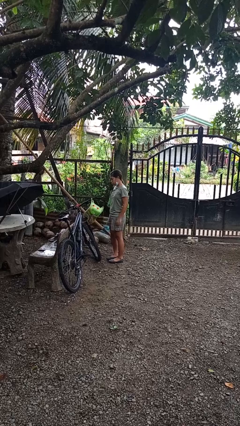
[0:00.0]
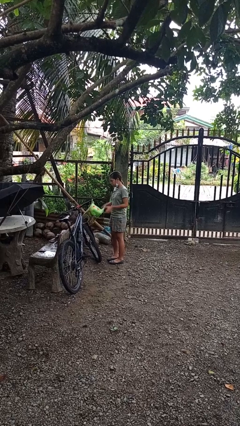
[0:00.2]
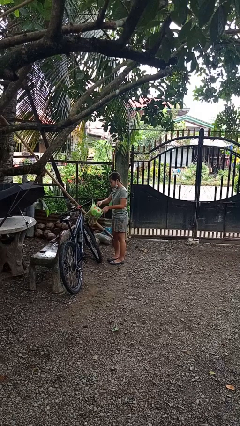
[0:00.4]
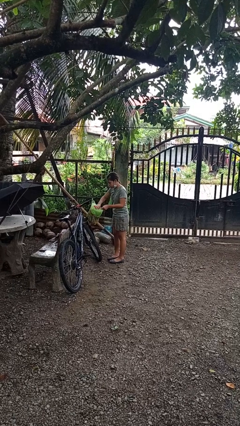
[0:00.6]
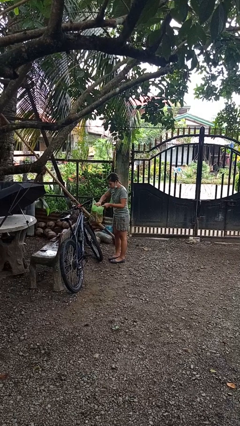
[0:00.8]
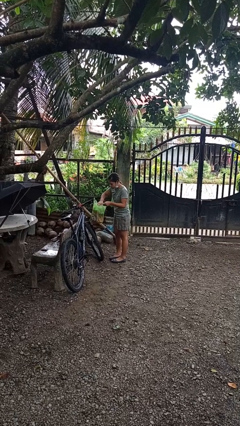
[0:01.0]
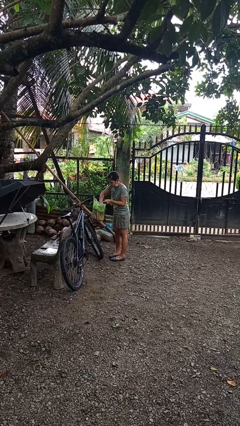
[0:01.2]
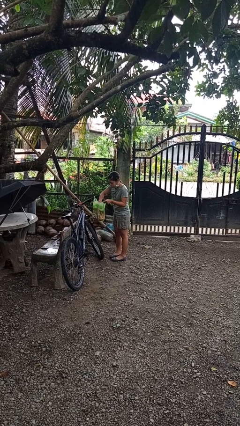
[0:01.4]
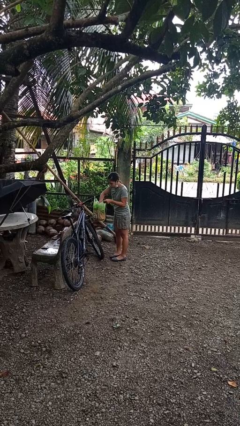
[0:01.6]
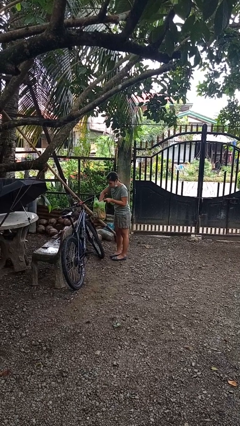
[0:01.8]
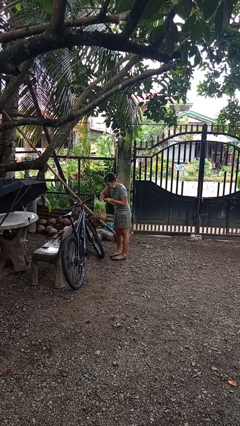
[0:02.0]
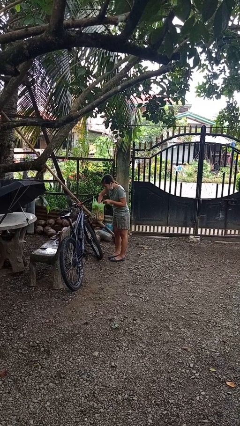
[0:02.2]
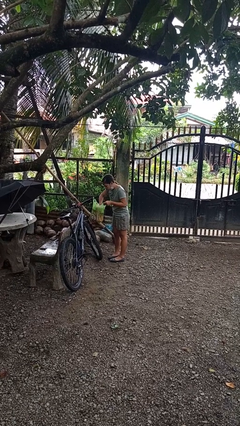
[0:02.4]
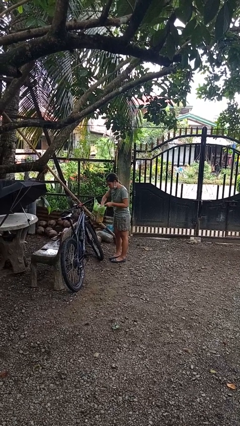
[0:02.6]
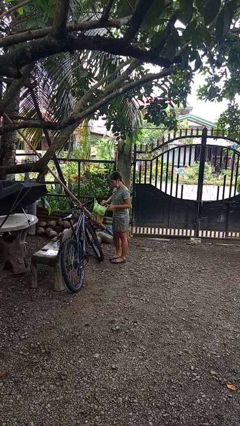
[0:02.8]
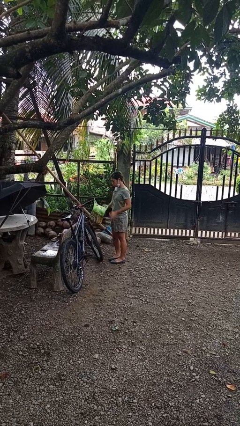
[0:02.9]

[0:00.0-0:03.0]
person searches in bag

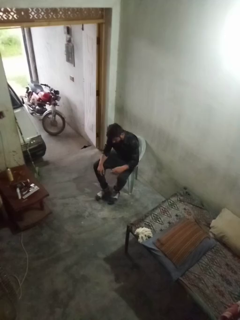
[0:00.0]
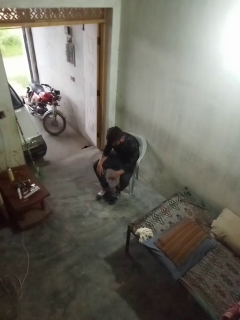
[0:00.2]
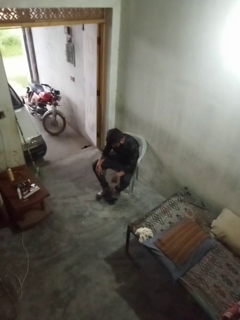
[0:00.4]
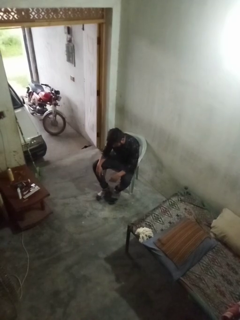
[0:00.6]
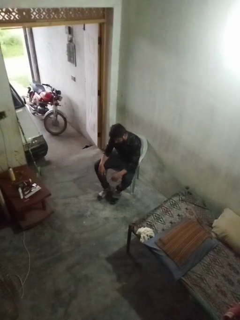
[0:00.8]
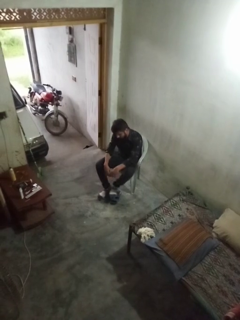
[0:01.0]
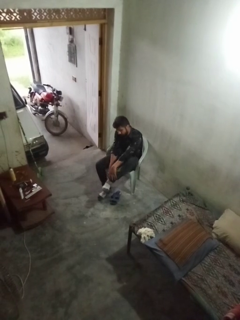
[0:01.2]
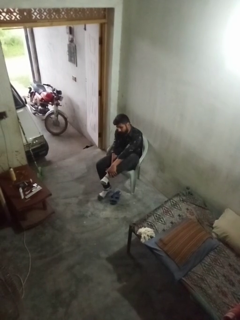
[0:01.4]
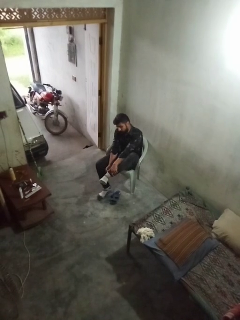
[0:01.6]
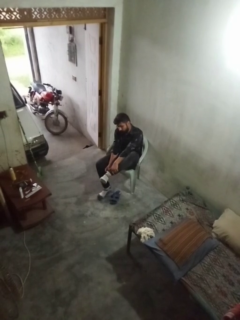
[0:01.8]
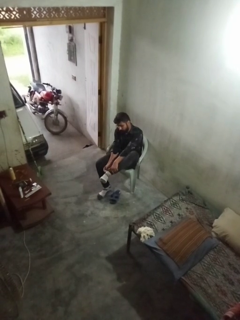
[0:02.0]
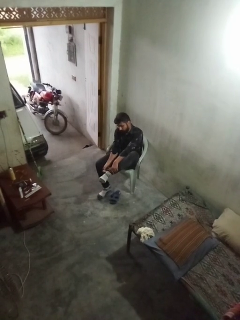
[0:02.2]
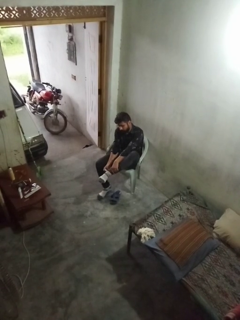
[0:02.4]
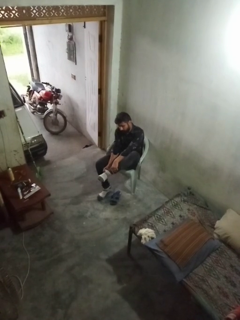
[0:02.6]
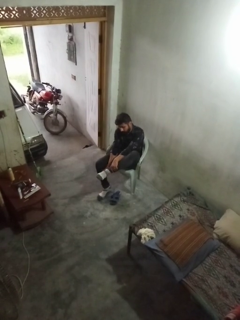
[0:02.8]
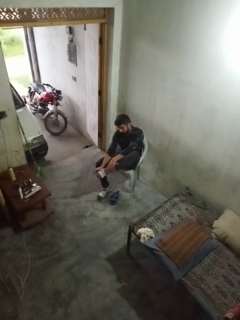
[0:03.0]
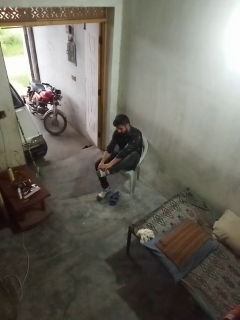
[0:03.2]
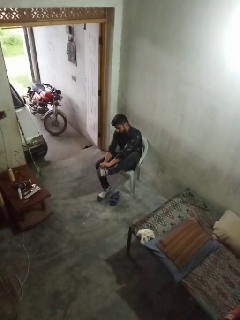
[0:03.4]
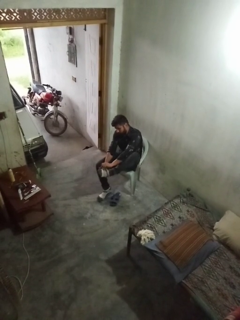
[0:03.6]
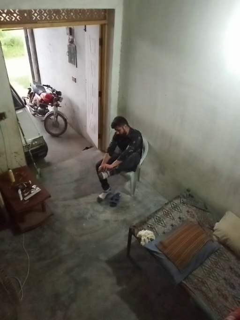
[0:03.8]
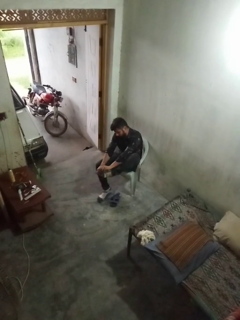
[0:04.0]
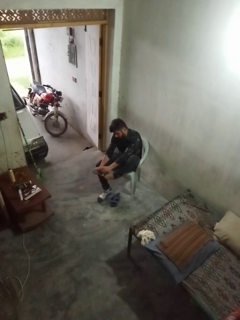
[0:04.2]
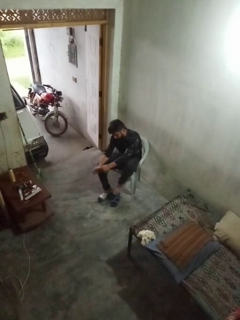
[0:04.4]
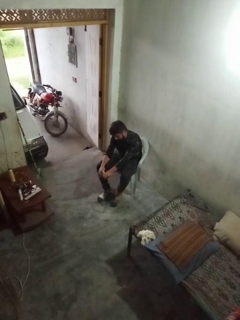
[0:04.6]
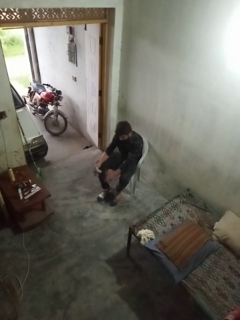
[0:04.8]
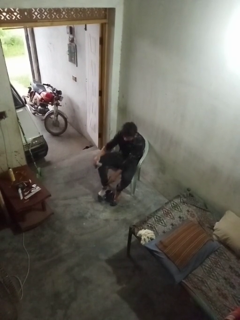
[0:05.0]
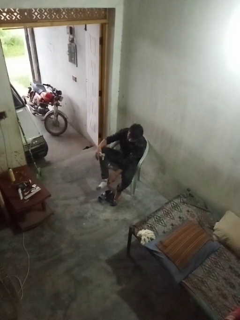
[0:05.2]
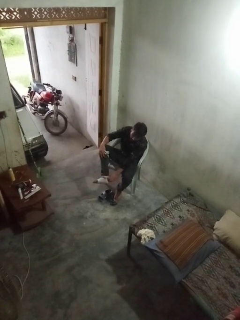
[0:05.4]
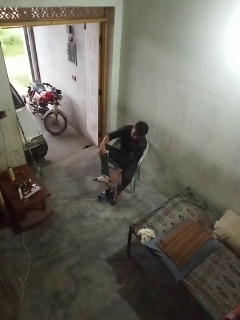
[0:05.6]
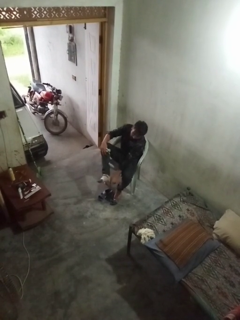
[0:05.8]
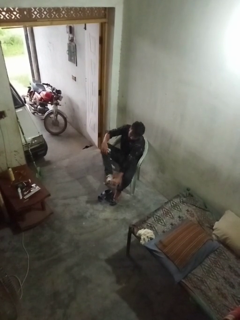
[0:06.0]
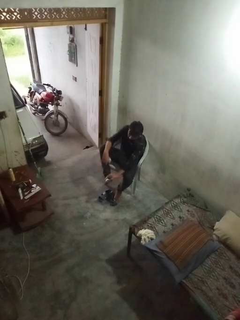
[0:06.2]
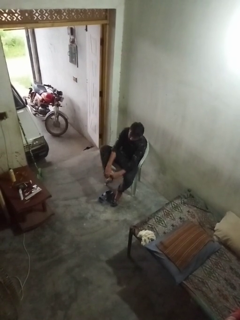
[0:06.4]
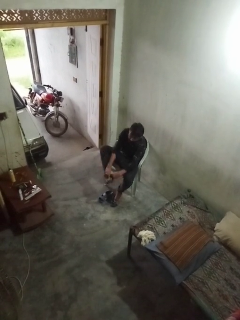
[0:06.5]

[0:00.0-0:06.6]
person takes off socks

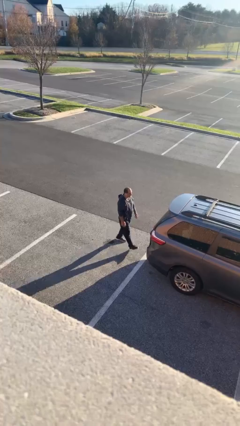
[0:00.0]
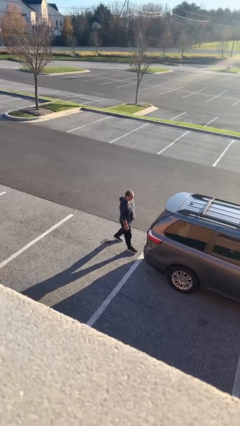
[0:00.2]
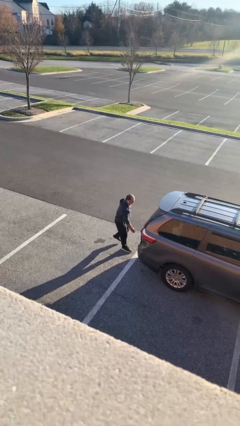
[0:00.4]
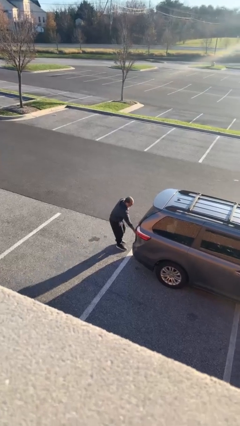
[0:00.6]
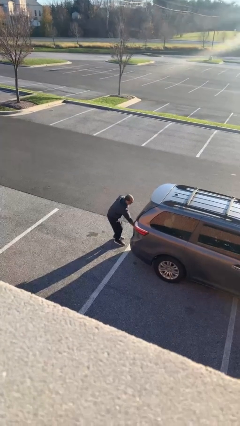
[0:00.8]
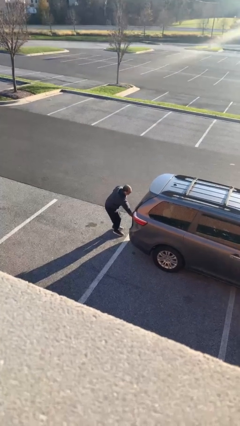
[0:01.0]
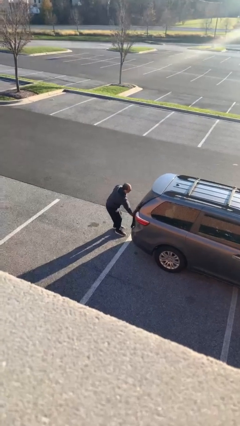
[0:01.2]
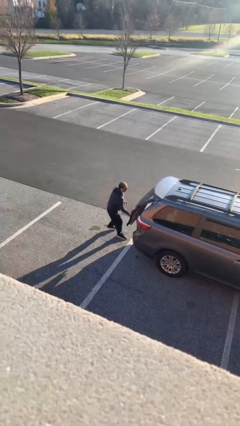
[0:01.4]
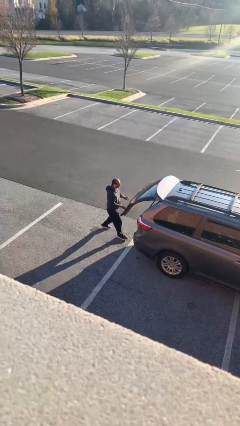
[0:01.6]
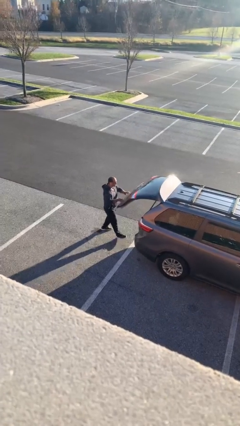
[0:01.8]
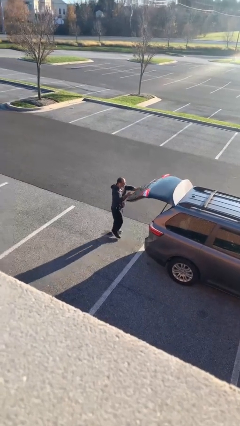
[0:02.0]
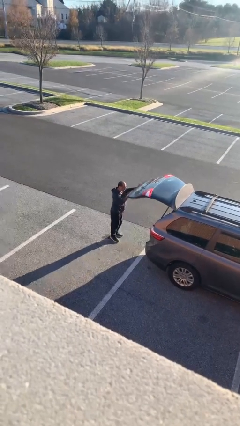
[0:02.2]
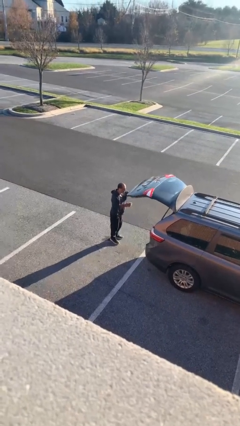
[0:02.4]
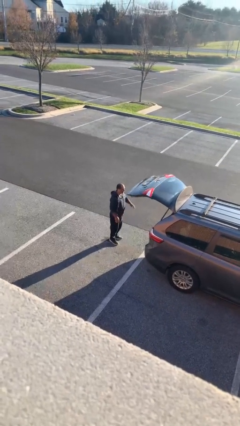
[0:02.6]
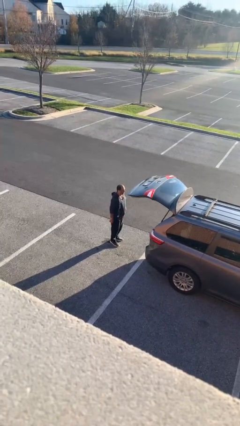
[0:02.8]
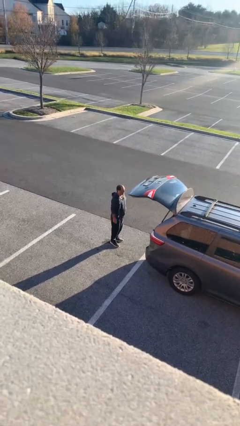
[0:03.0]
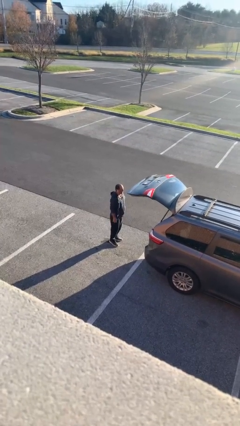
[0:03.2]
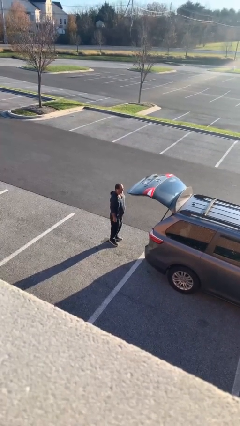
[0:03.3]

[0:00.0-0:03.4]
person opens car trunk

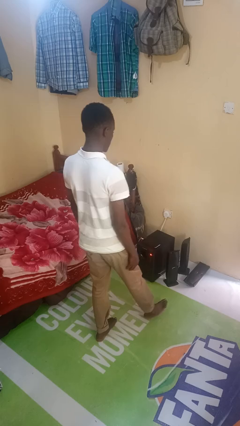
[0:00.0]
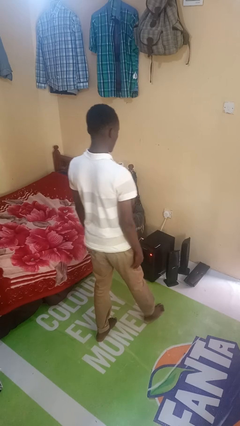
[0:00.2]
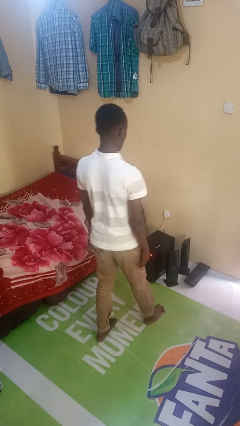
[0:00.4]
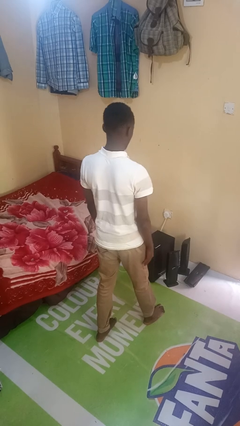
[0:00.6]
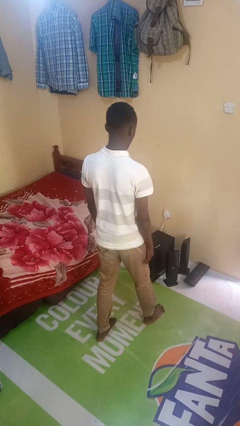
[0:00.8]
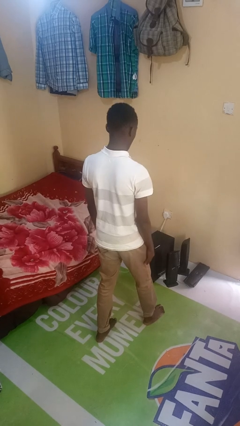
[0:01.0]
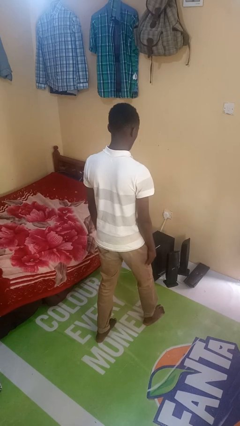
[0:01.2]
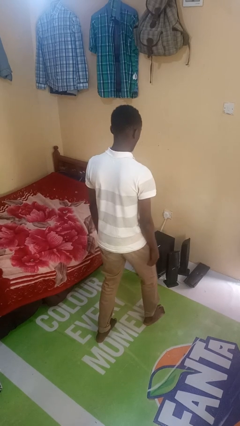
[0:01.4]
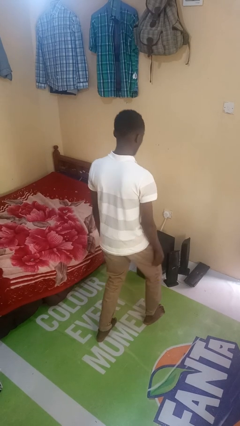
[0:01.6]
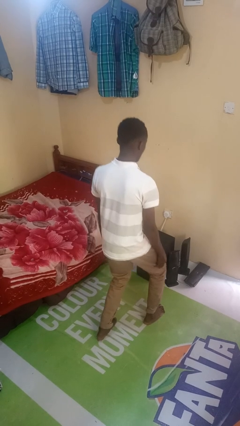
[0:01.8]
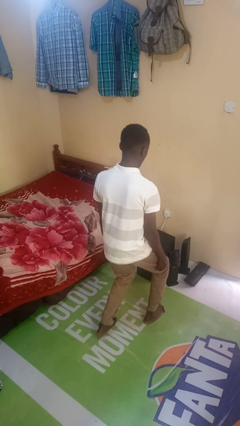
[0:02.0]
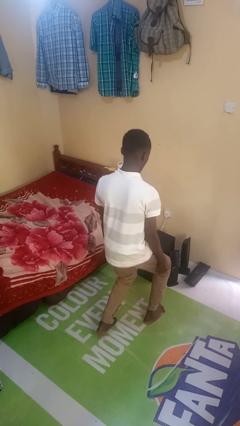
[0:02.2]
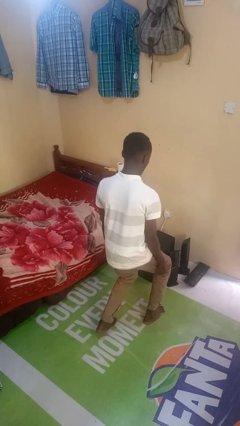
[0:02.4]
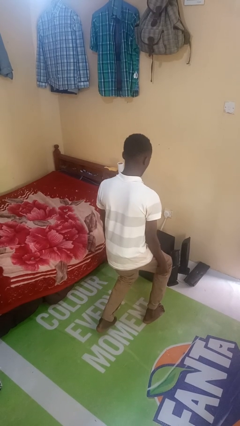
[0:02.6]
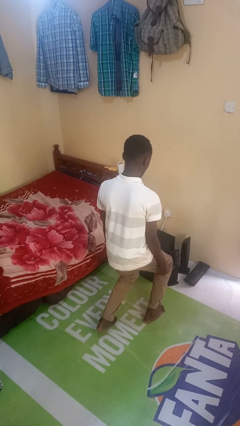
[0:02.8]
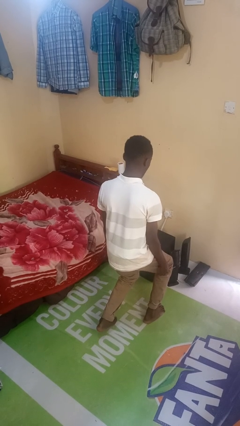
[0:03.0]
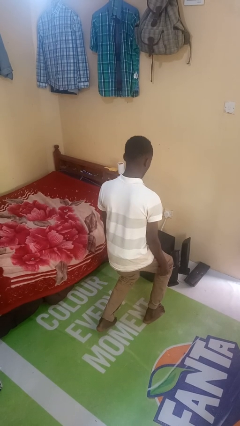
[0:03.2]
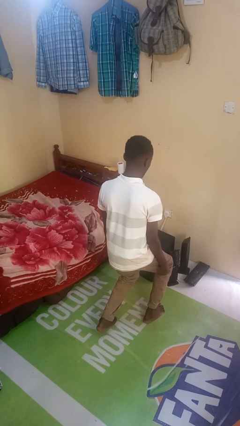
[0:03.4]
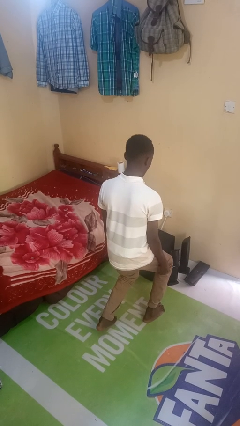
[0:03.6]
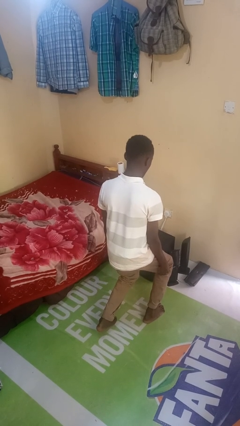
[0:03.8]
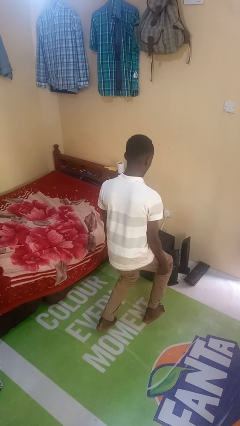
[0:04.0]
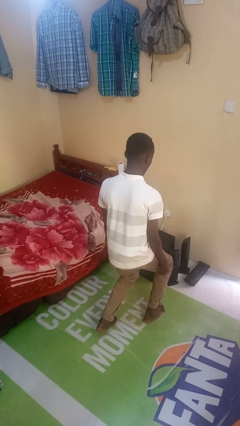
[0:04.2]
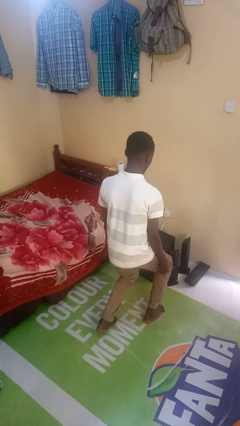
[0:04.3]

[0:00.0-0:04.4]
person exercises with lunges

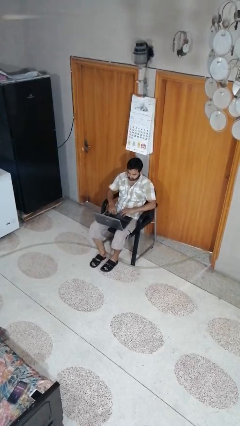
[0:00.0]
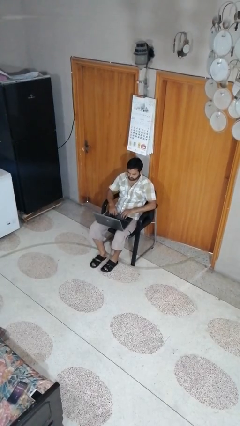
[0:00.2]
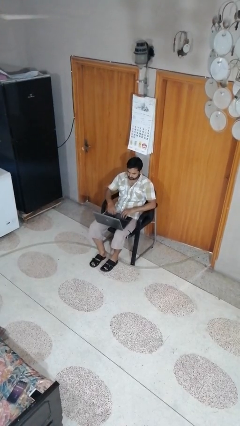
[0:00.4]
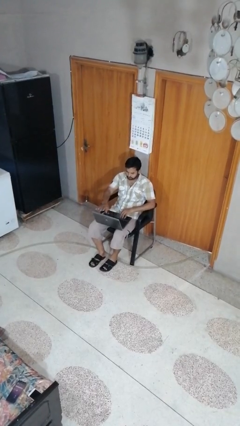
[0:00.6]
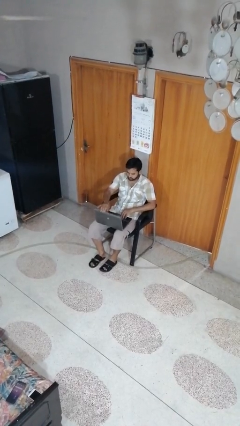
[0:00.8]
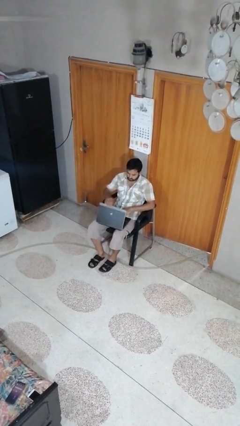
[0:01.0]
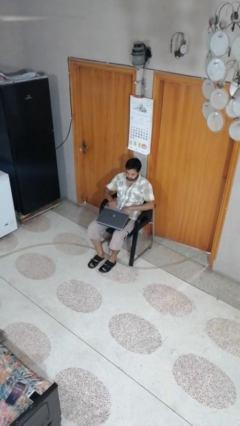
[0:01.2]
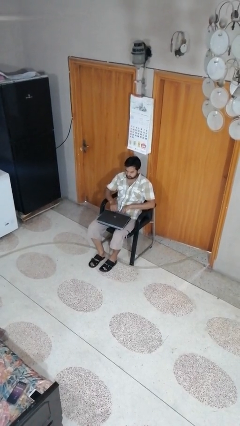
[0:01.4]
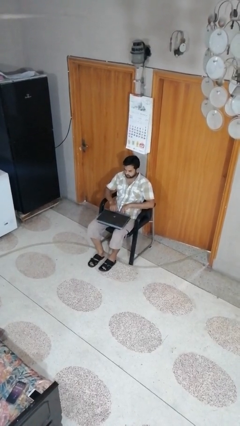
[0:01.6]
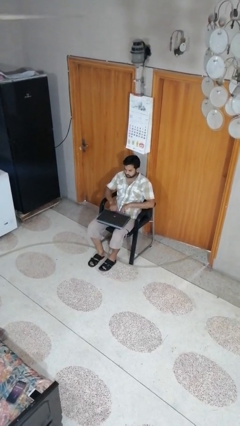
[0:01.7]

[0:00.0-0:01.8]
person closes laptop
